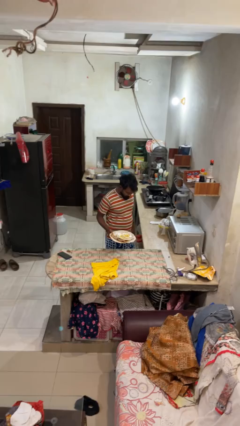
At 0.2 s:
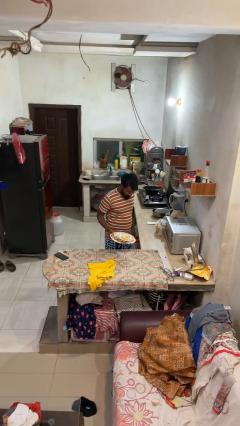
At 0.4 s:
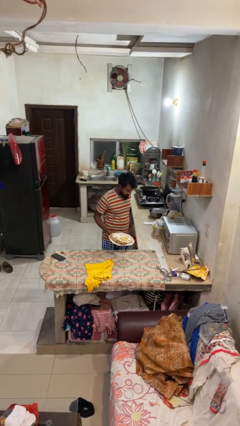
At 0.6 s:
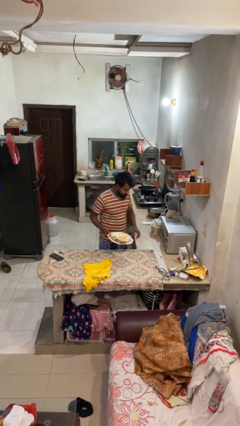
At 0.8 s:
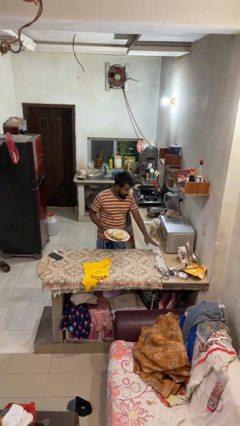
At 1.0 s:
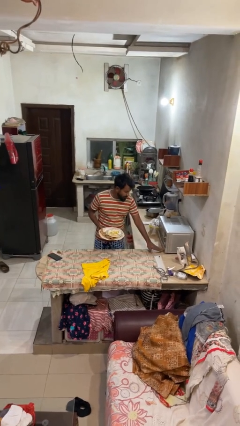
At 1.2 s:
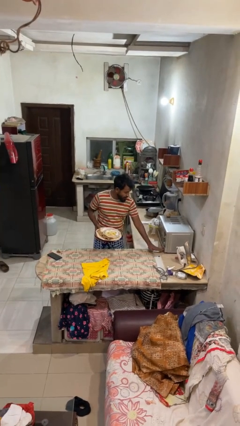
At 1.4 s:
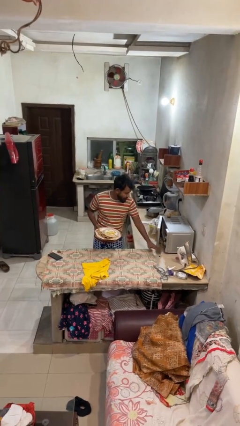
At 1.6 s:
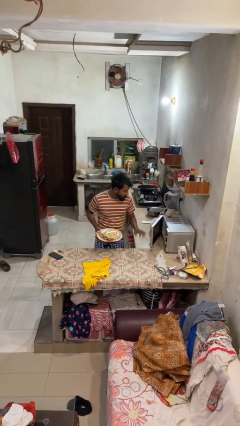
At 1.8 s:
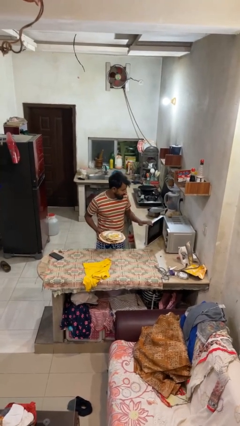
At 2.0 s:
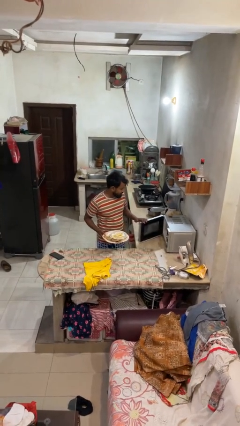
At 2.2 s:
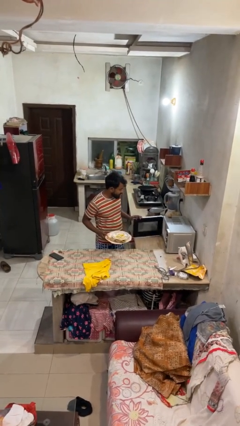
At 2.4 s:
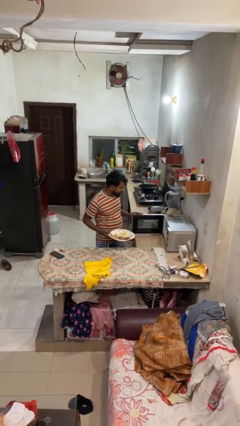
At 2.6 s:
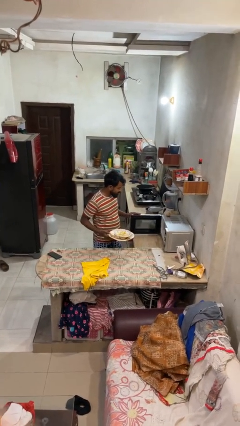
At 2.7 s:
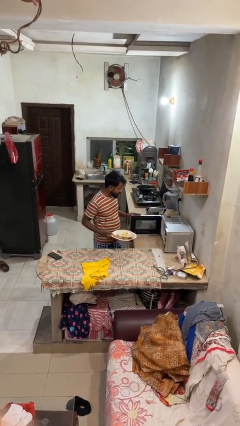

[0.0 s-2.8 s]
person opens microwave

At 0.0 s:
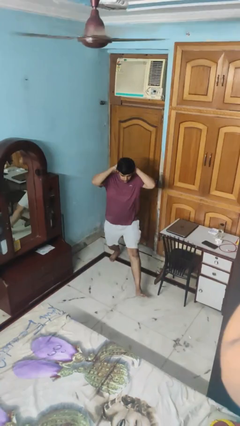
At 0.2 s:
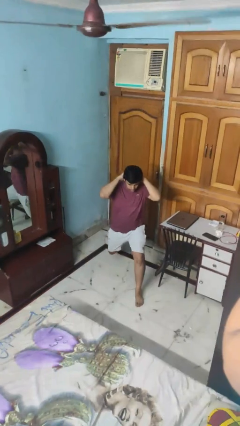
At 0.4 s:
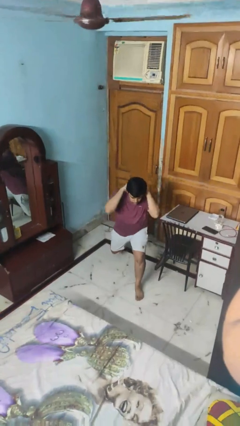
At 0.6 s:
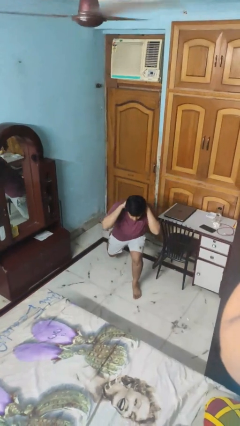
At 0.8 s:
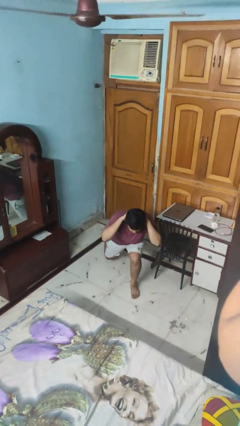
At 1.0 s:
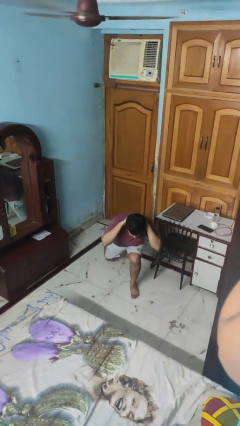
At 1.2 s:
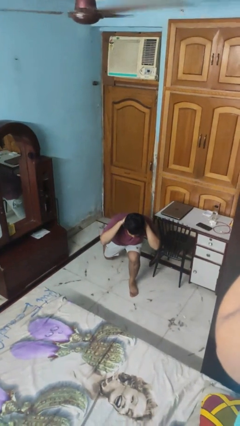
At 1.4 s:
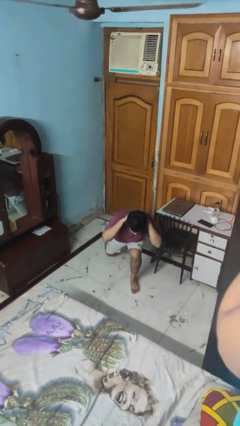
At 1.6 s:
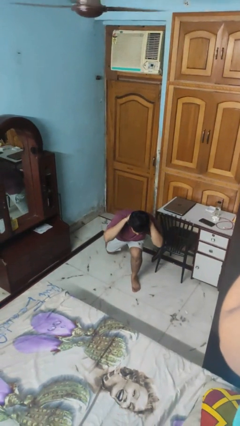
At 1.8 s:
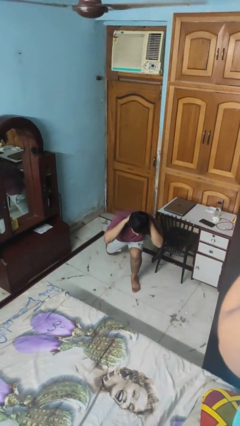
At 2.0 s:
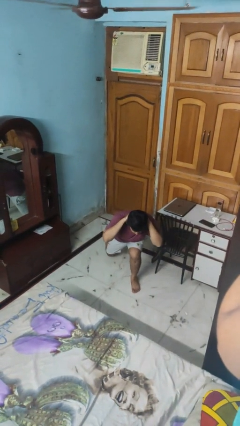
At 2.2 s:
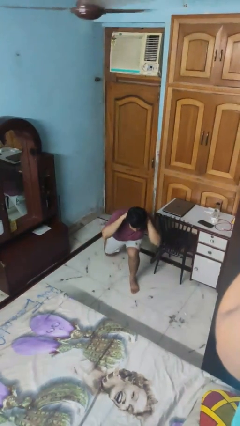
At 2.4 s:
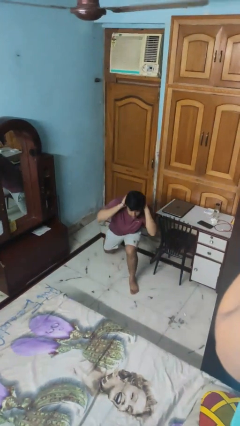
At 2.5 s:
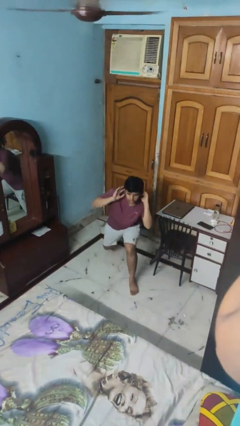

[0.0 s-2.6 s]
person exercises with lunges

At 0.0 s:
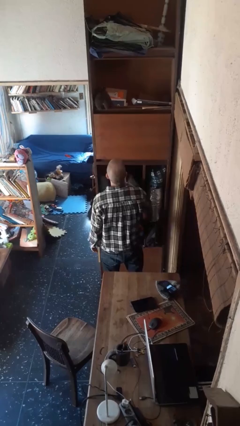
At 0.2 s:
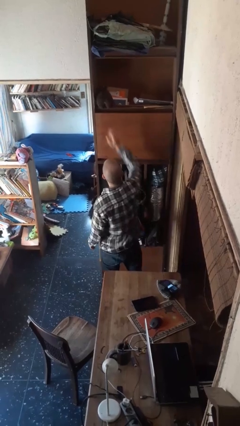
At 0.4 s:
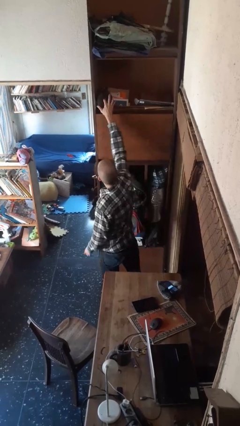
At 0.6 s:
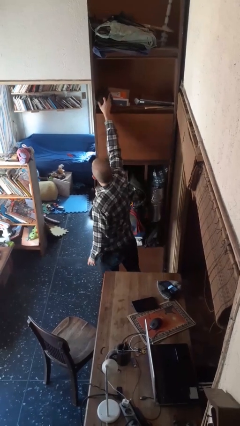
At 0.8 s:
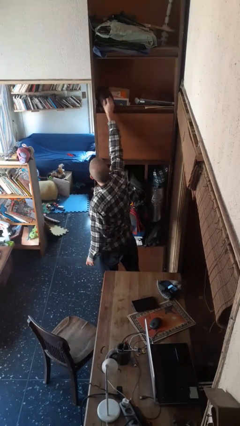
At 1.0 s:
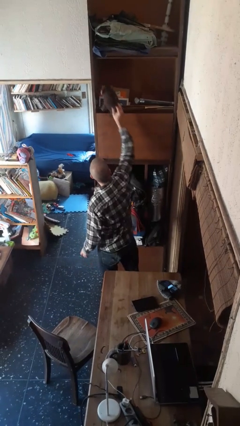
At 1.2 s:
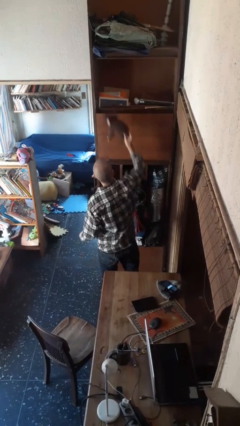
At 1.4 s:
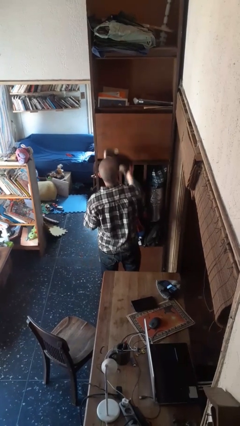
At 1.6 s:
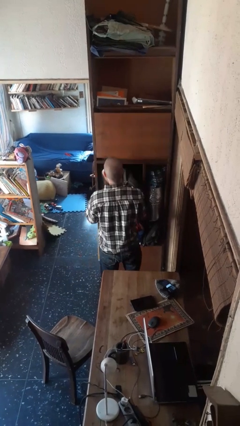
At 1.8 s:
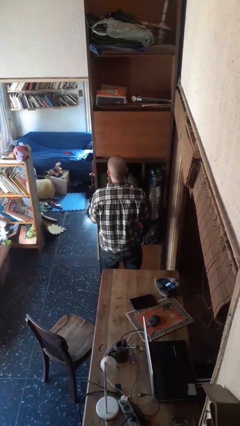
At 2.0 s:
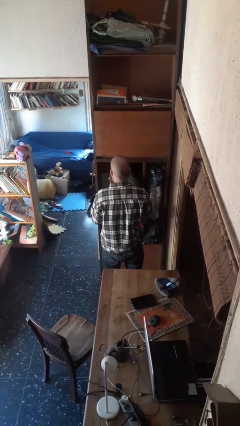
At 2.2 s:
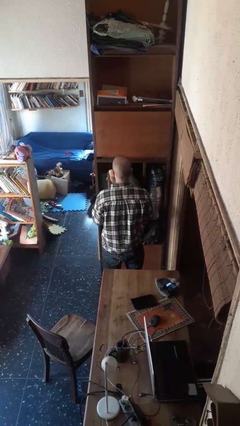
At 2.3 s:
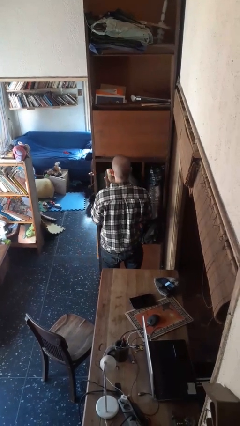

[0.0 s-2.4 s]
person picks up object from shelf

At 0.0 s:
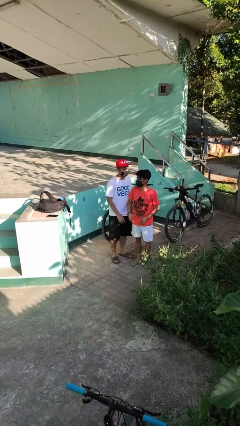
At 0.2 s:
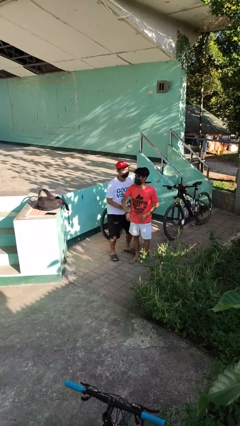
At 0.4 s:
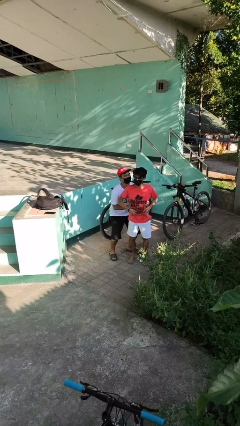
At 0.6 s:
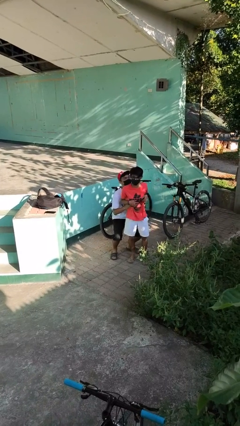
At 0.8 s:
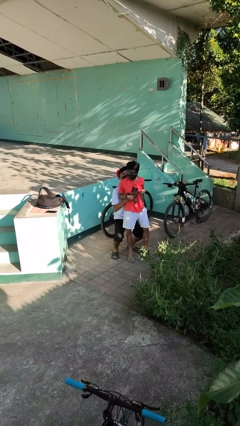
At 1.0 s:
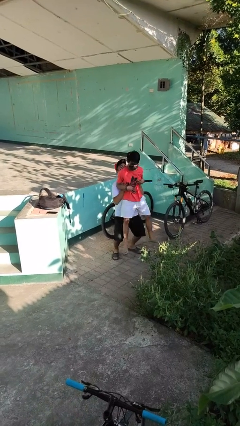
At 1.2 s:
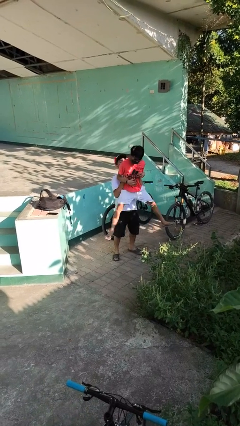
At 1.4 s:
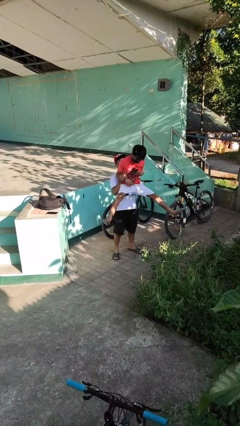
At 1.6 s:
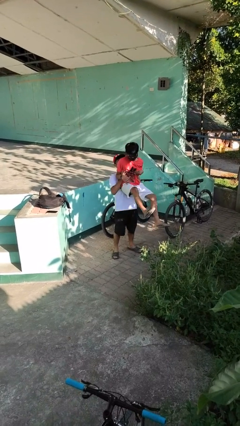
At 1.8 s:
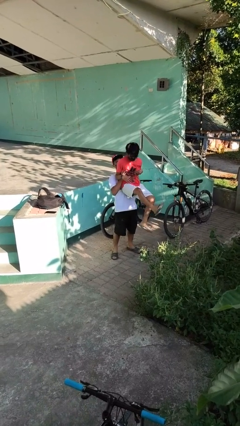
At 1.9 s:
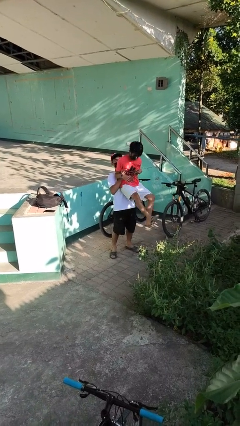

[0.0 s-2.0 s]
person picks up person

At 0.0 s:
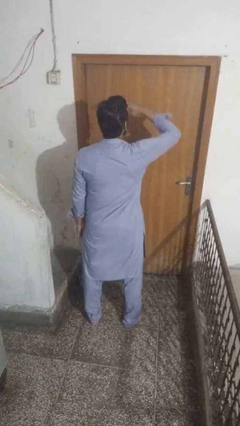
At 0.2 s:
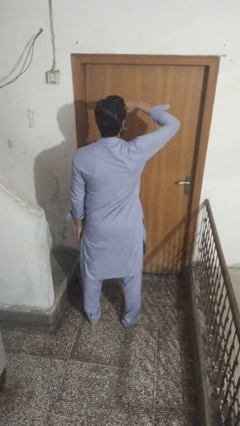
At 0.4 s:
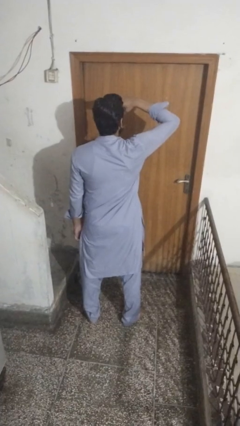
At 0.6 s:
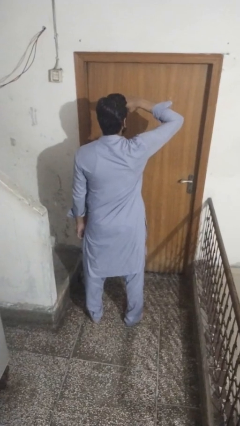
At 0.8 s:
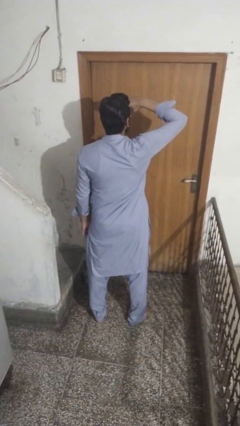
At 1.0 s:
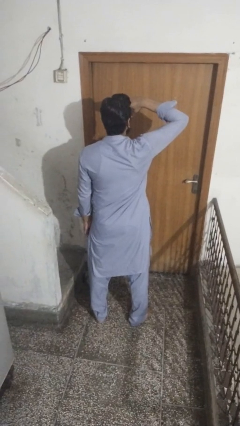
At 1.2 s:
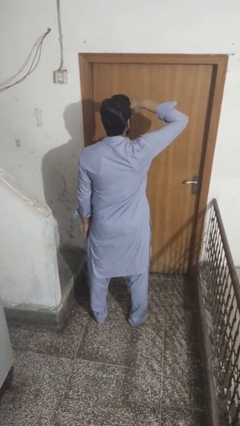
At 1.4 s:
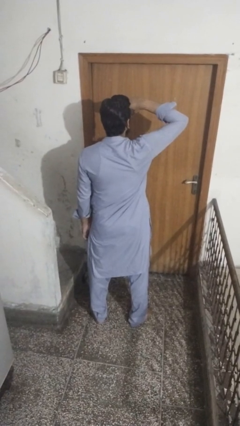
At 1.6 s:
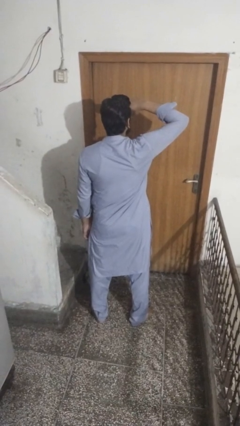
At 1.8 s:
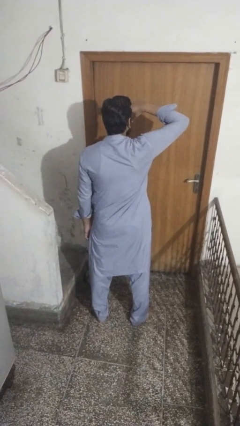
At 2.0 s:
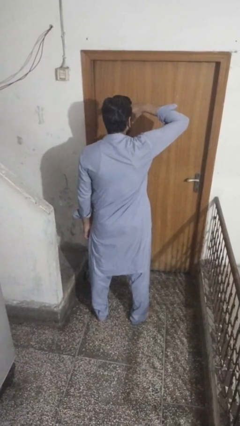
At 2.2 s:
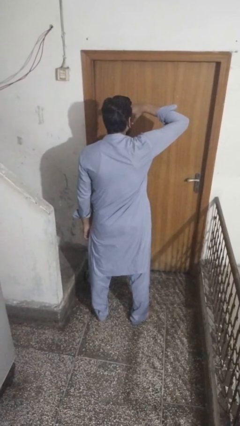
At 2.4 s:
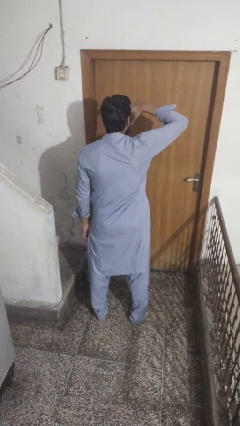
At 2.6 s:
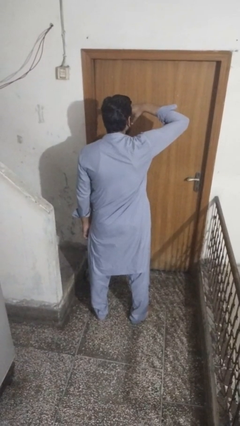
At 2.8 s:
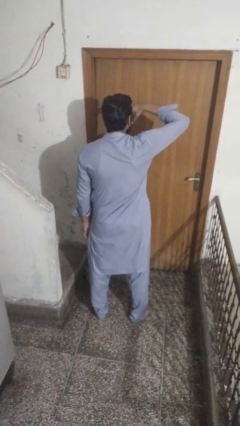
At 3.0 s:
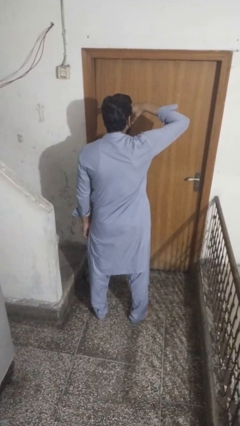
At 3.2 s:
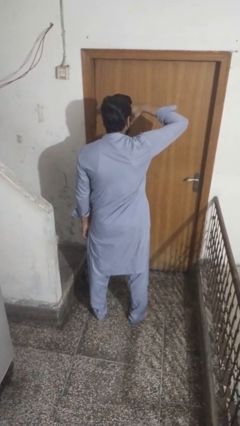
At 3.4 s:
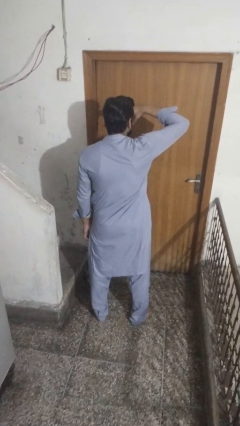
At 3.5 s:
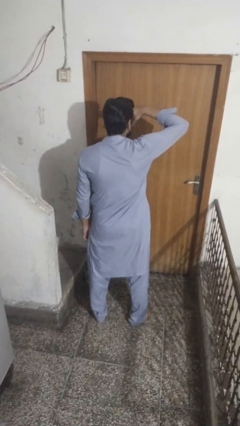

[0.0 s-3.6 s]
person shades eyes

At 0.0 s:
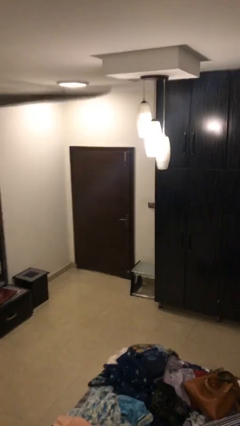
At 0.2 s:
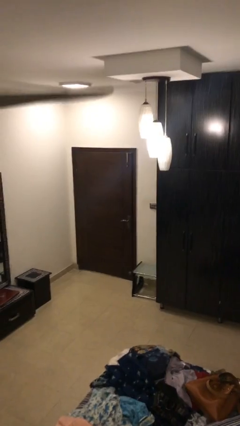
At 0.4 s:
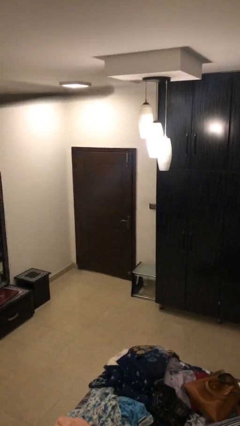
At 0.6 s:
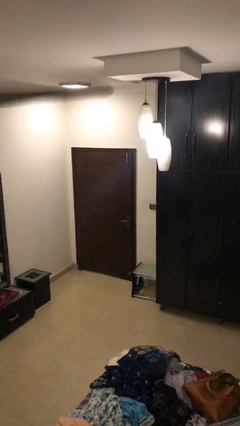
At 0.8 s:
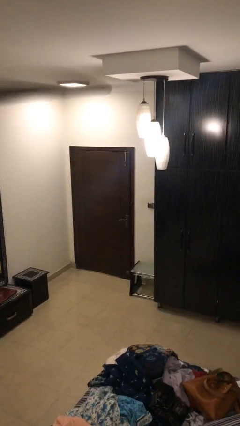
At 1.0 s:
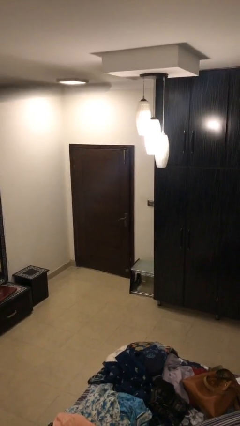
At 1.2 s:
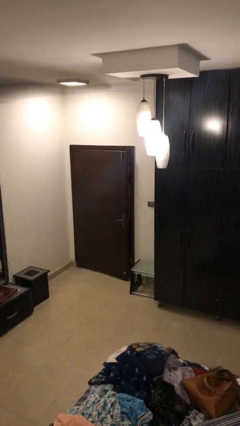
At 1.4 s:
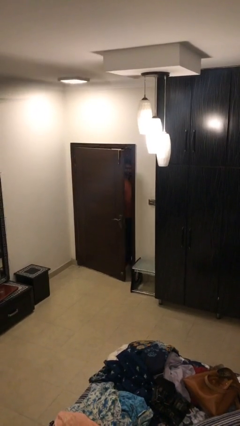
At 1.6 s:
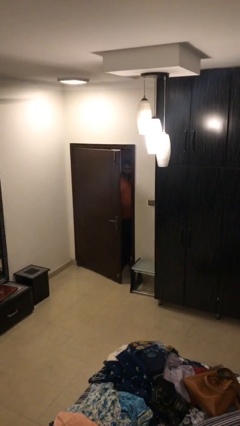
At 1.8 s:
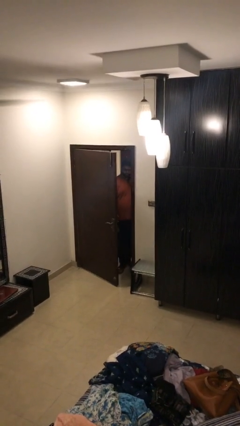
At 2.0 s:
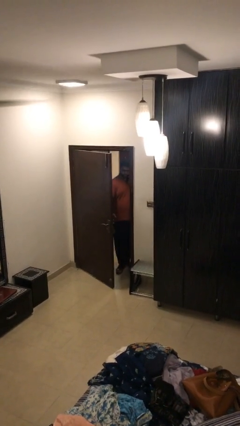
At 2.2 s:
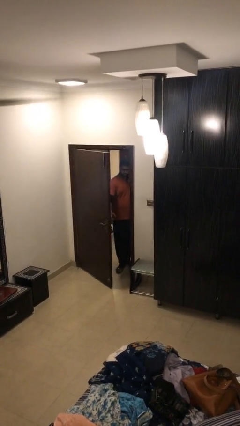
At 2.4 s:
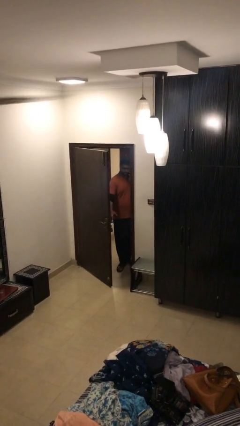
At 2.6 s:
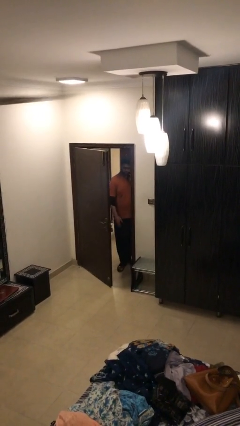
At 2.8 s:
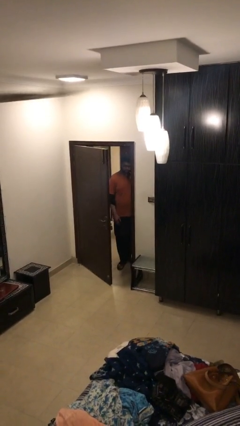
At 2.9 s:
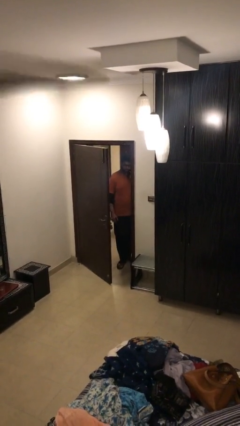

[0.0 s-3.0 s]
person opens facility door

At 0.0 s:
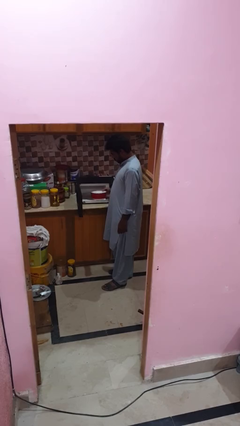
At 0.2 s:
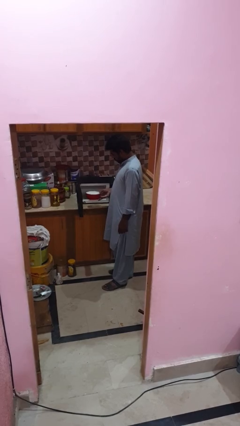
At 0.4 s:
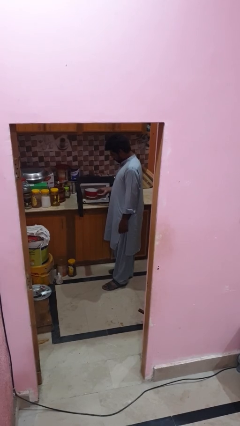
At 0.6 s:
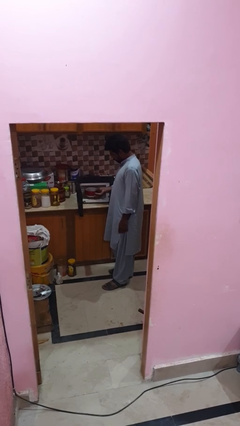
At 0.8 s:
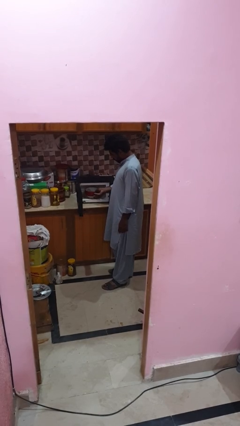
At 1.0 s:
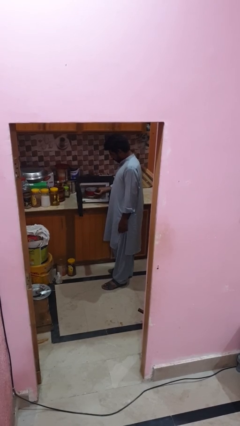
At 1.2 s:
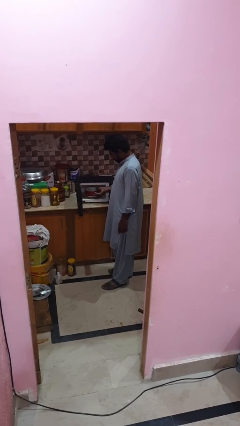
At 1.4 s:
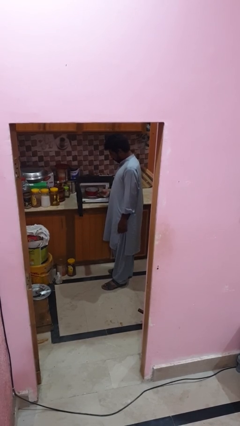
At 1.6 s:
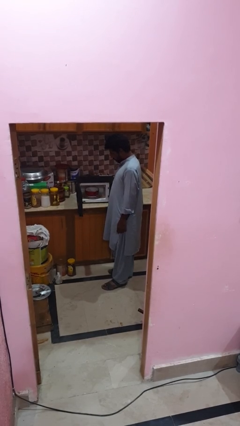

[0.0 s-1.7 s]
person puts object into microwave
